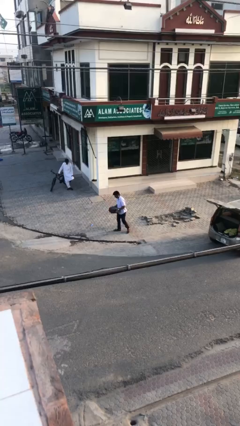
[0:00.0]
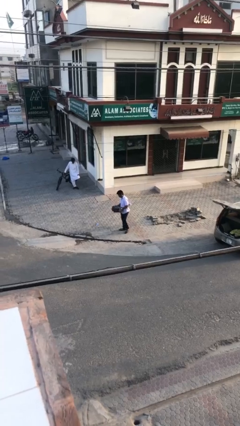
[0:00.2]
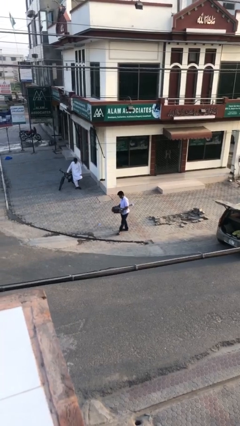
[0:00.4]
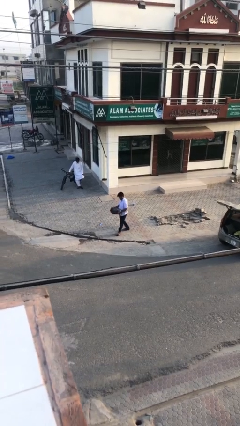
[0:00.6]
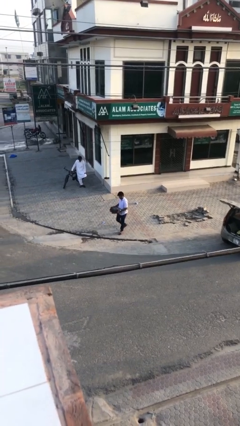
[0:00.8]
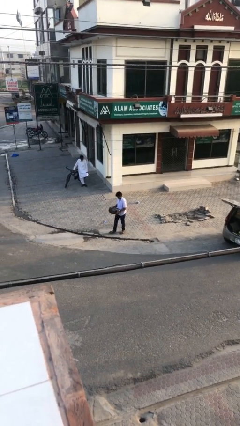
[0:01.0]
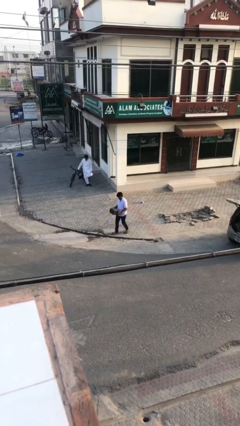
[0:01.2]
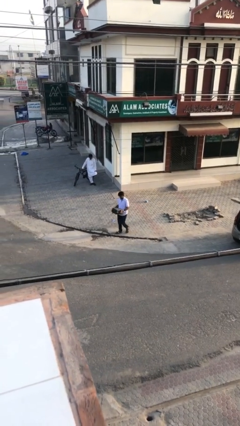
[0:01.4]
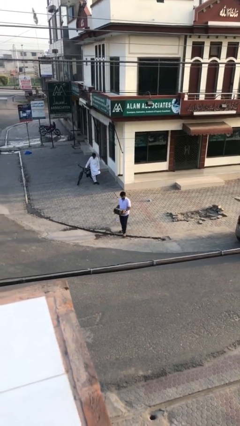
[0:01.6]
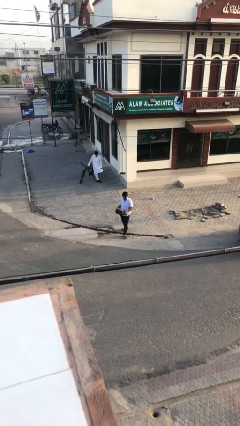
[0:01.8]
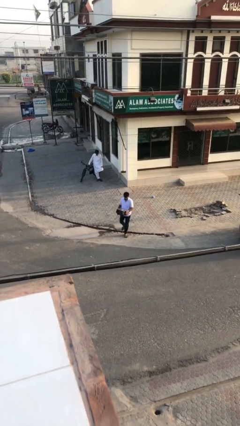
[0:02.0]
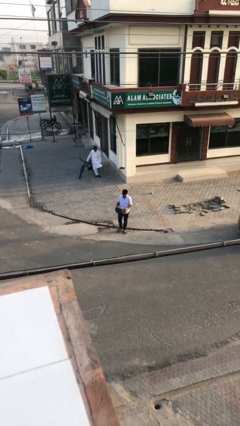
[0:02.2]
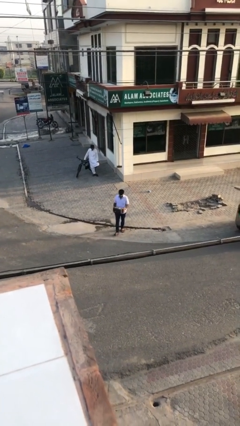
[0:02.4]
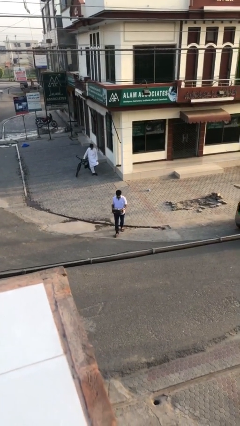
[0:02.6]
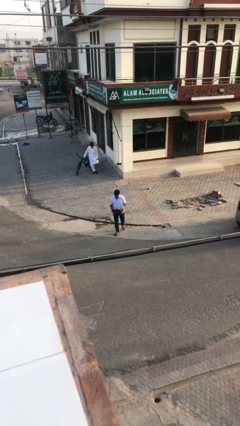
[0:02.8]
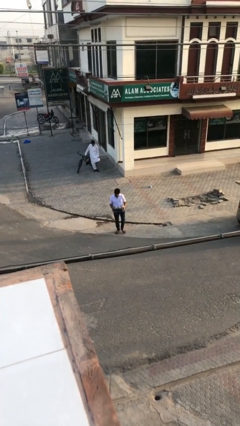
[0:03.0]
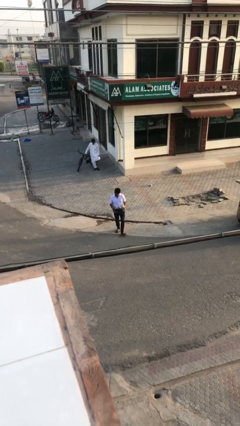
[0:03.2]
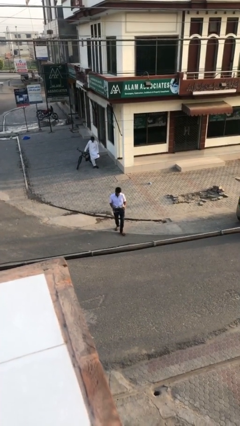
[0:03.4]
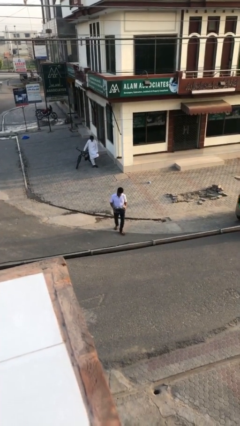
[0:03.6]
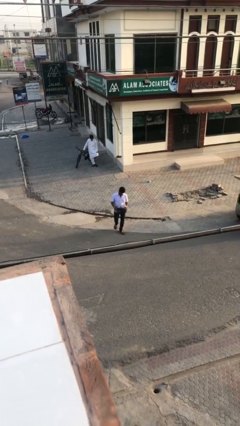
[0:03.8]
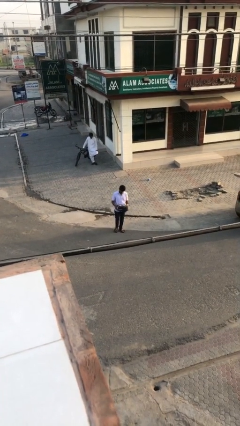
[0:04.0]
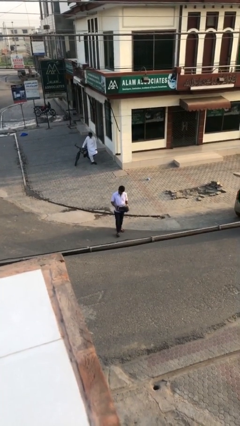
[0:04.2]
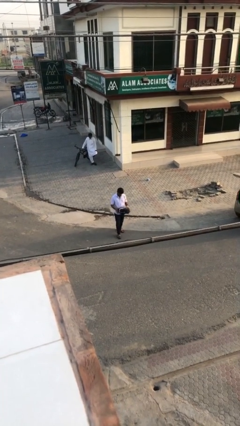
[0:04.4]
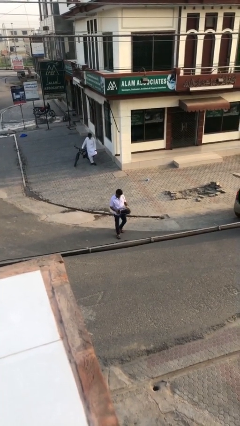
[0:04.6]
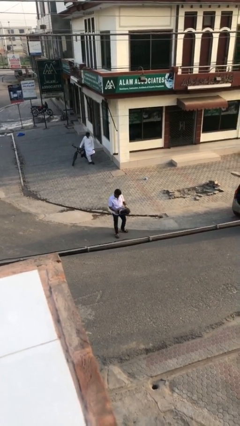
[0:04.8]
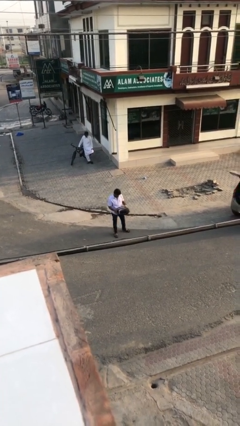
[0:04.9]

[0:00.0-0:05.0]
person carries heavy object

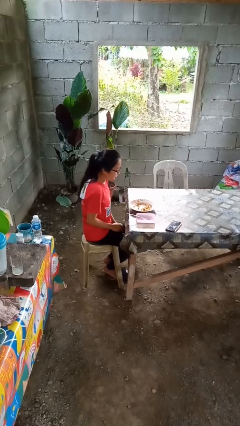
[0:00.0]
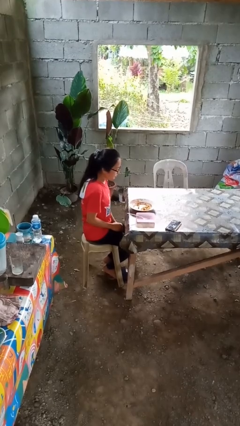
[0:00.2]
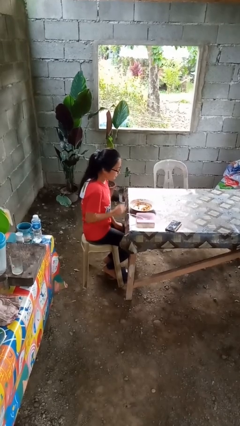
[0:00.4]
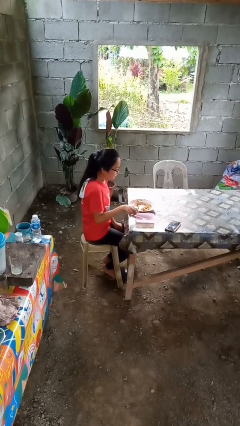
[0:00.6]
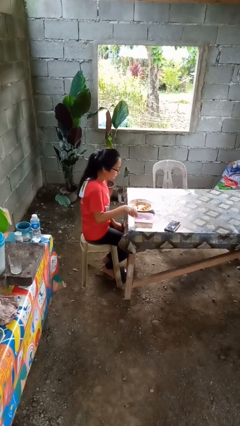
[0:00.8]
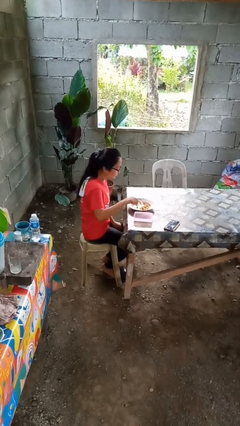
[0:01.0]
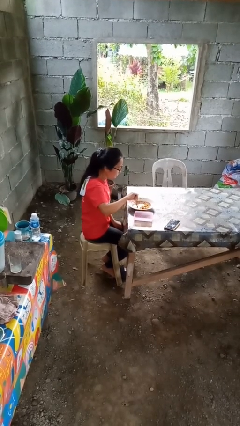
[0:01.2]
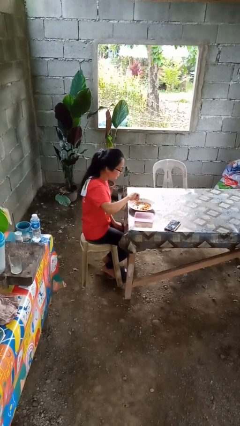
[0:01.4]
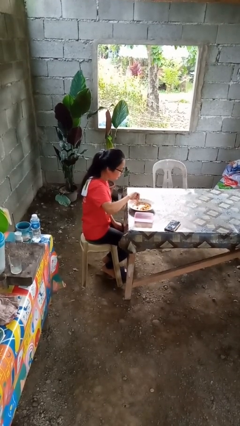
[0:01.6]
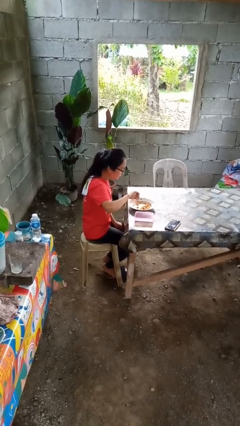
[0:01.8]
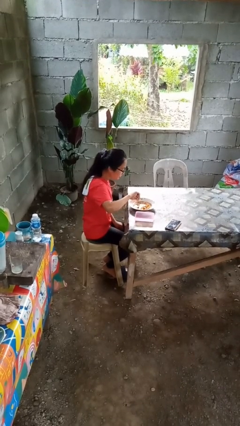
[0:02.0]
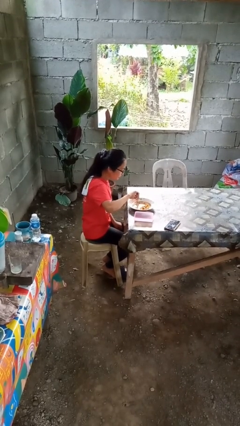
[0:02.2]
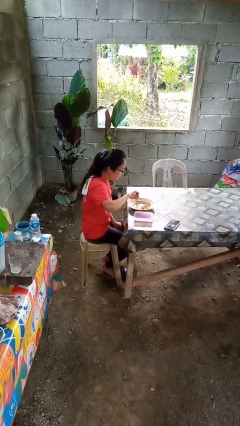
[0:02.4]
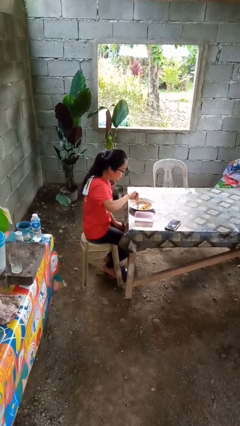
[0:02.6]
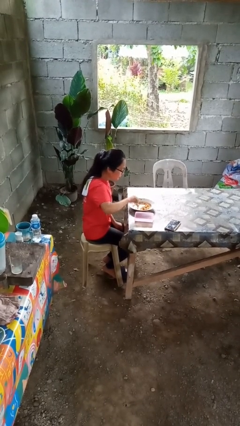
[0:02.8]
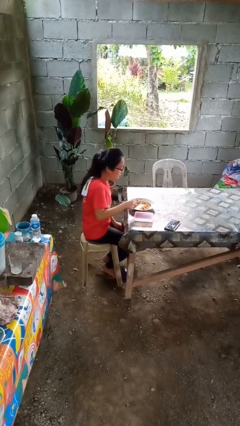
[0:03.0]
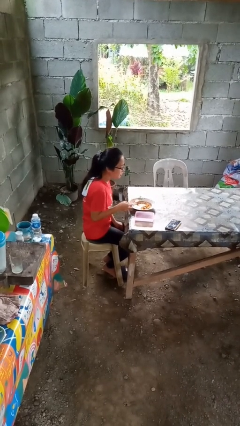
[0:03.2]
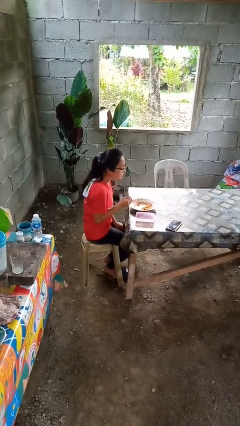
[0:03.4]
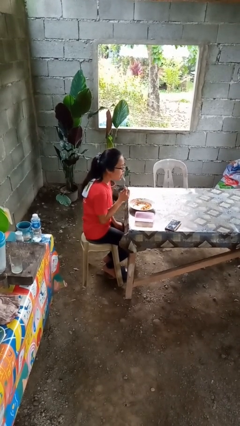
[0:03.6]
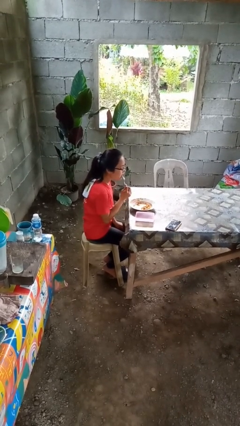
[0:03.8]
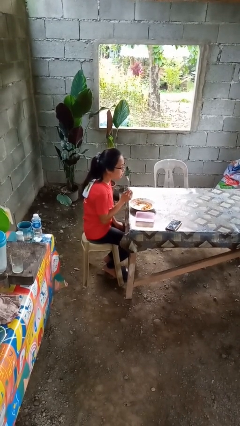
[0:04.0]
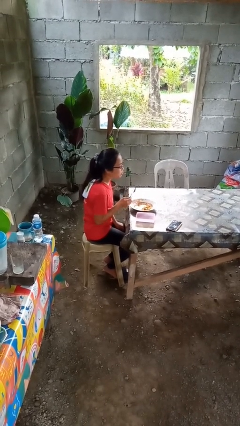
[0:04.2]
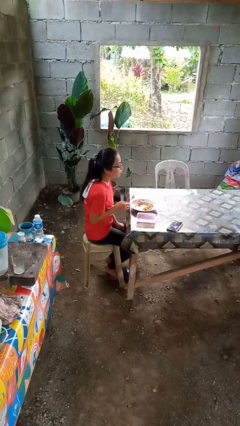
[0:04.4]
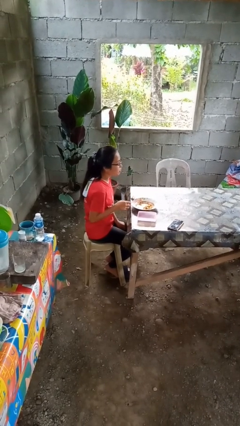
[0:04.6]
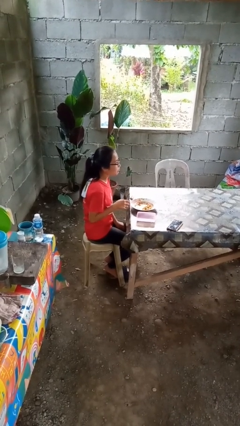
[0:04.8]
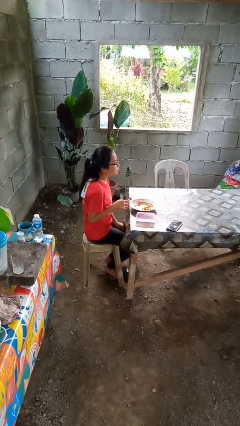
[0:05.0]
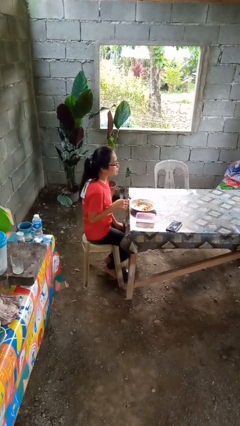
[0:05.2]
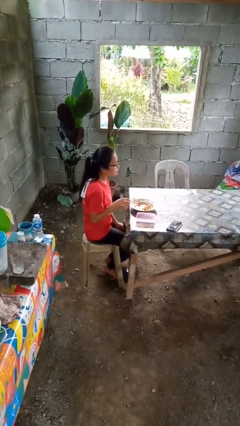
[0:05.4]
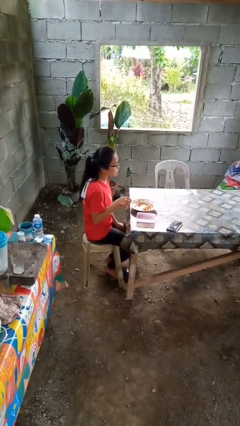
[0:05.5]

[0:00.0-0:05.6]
person eats with utensil

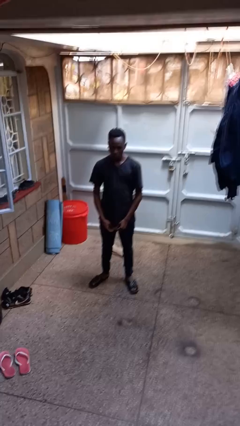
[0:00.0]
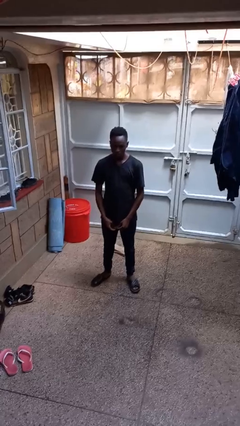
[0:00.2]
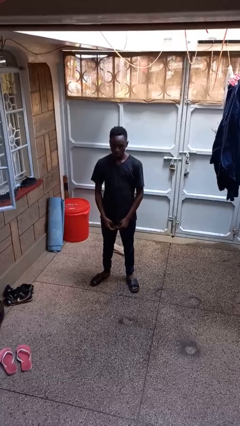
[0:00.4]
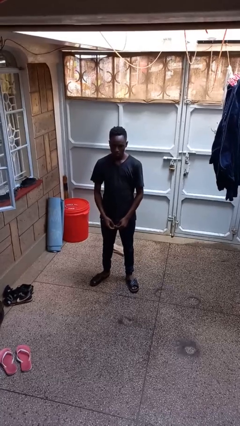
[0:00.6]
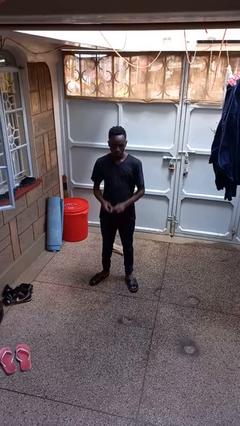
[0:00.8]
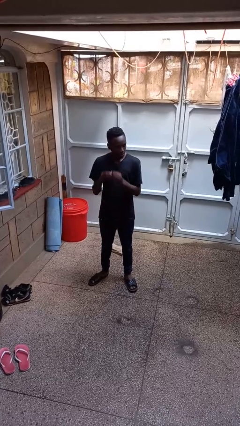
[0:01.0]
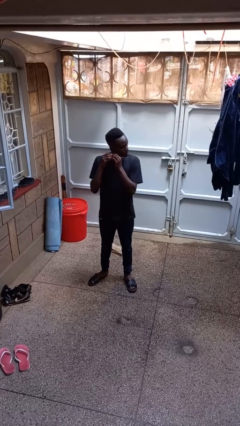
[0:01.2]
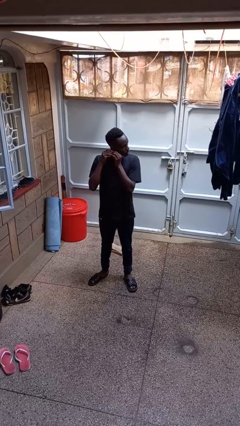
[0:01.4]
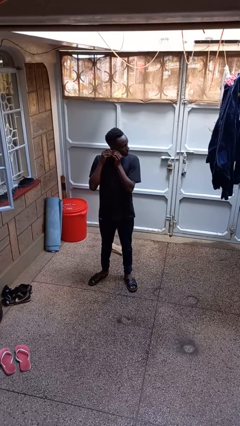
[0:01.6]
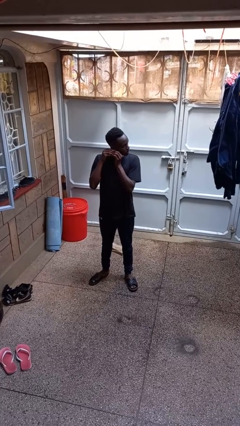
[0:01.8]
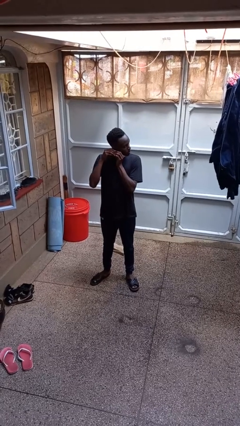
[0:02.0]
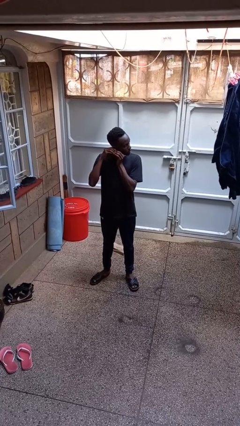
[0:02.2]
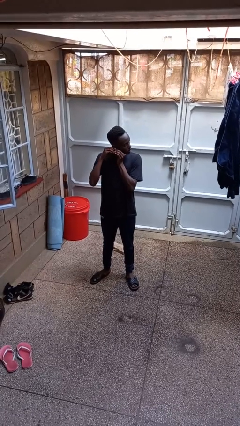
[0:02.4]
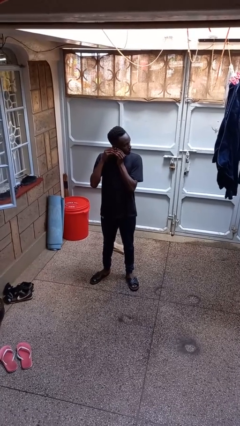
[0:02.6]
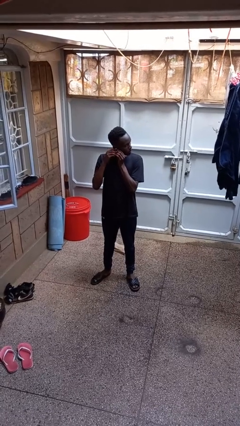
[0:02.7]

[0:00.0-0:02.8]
person puts on earrings

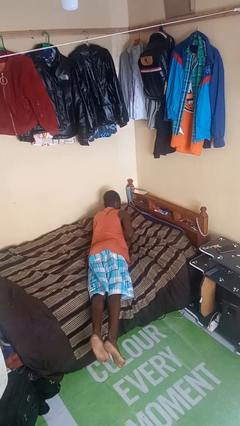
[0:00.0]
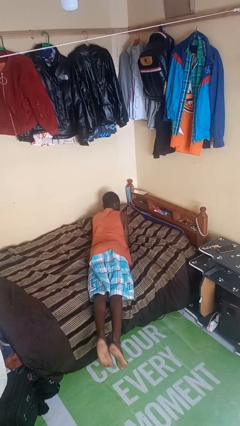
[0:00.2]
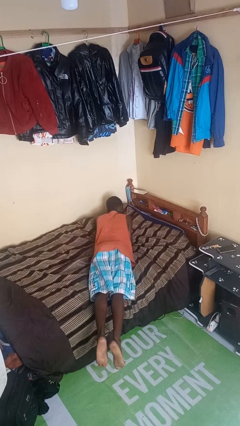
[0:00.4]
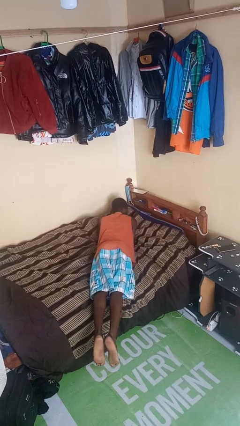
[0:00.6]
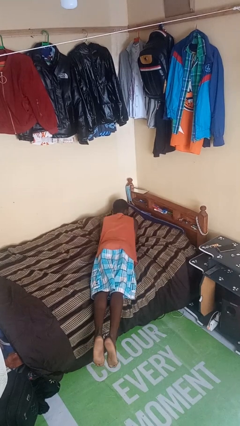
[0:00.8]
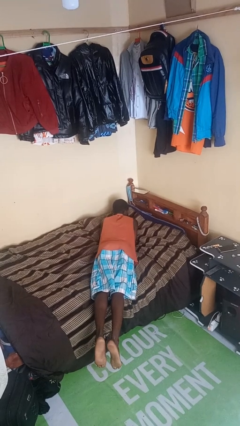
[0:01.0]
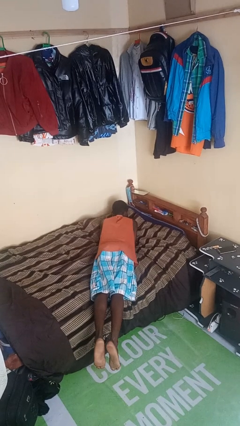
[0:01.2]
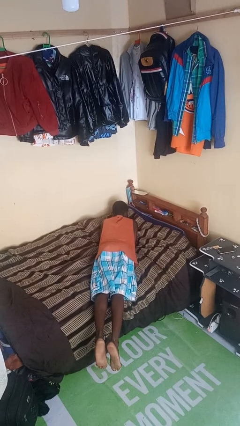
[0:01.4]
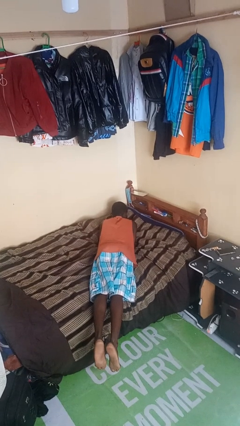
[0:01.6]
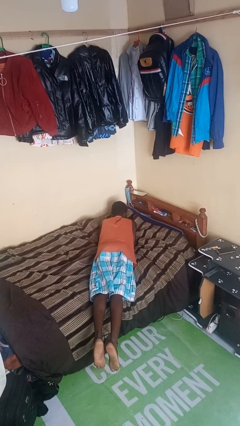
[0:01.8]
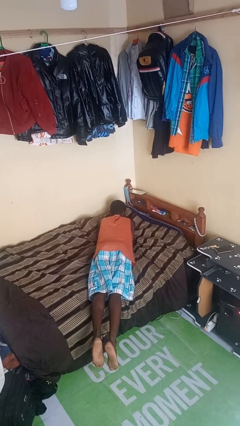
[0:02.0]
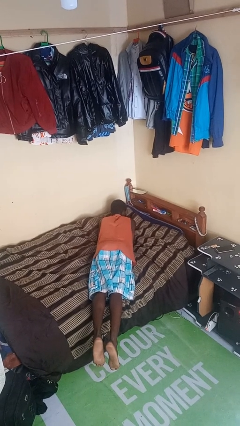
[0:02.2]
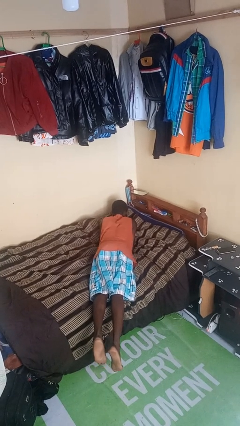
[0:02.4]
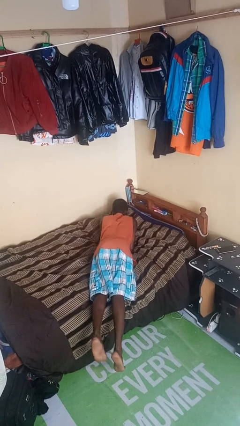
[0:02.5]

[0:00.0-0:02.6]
person lies down on bed

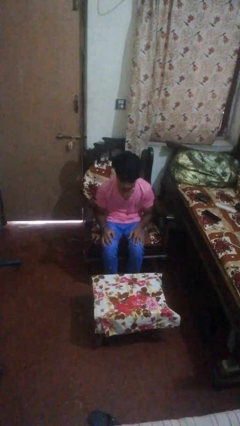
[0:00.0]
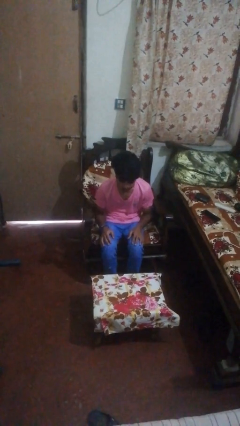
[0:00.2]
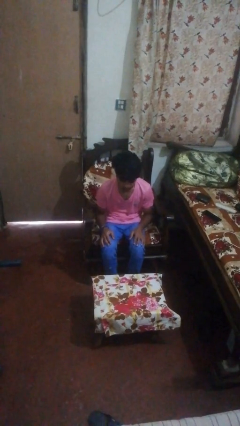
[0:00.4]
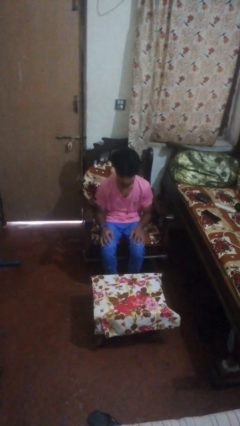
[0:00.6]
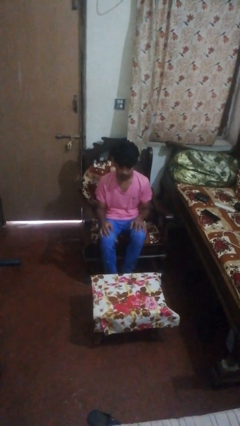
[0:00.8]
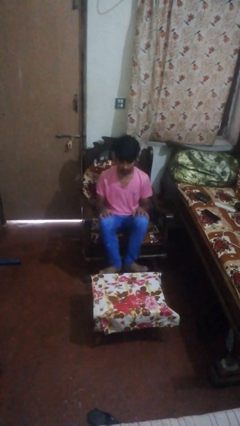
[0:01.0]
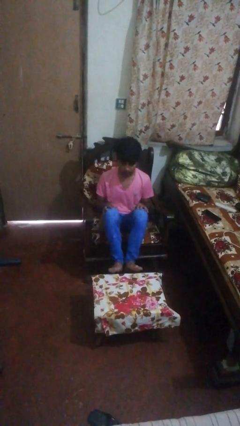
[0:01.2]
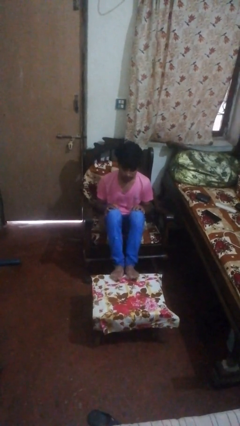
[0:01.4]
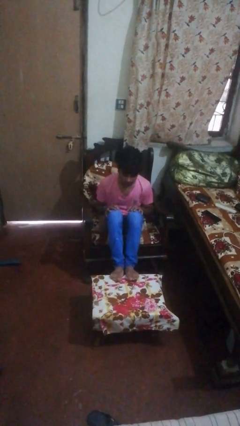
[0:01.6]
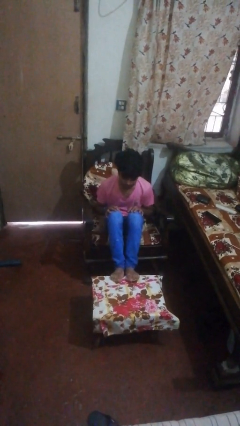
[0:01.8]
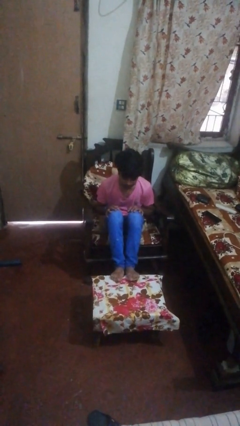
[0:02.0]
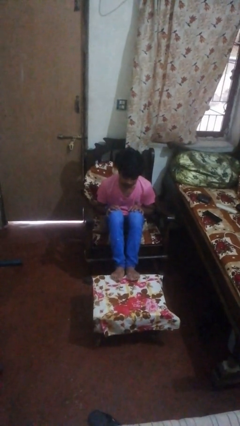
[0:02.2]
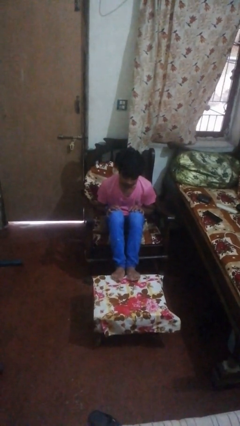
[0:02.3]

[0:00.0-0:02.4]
person puts feet up
